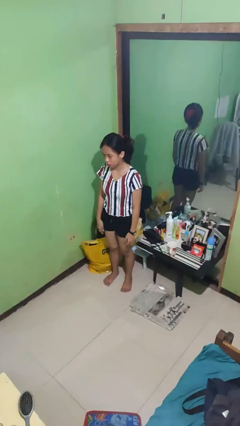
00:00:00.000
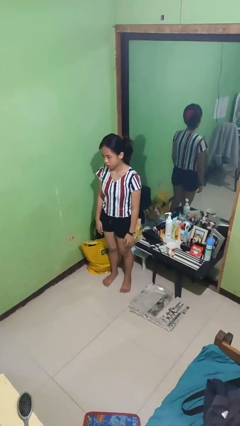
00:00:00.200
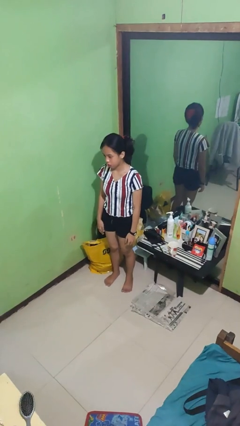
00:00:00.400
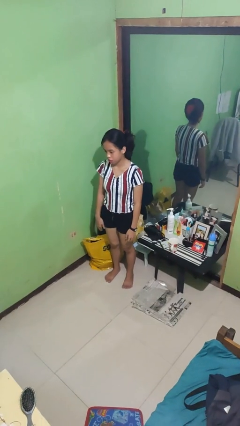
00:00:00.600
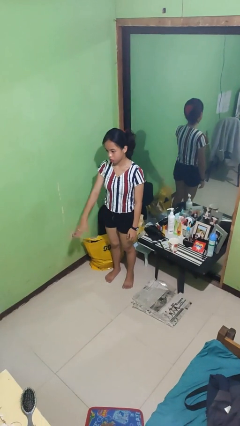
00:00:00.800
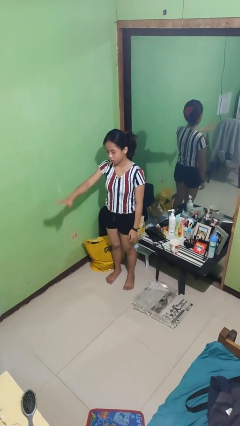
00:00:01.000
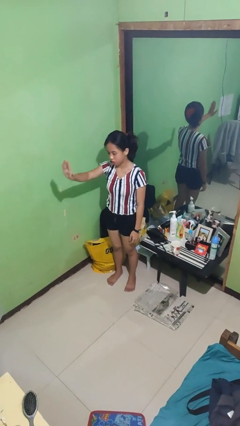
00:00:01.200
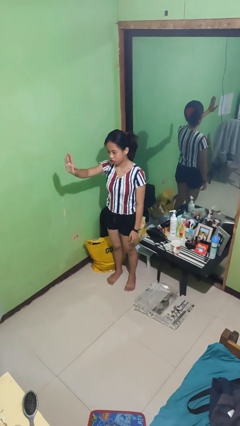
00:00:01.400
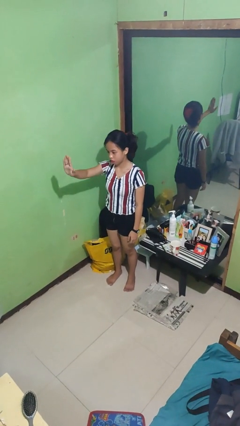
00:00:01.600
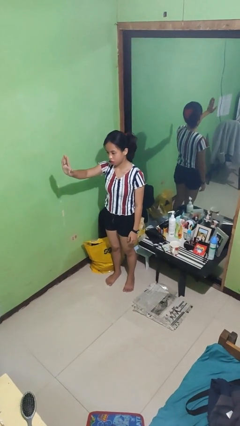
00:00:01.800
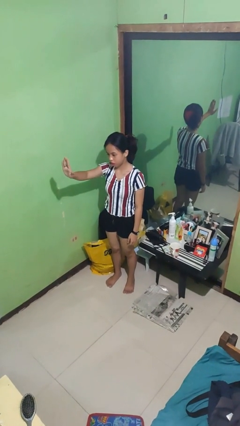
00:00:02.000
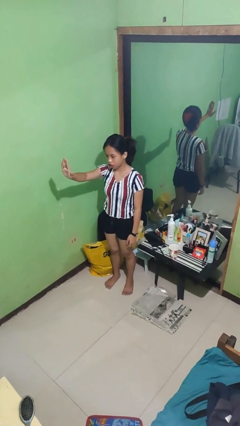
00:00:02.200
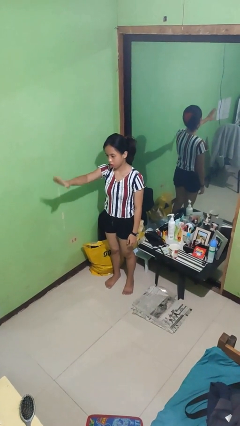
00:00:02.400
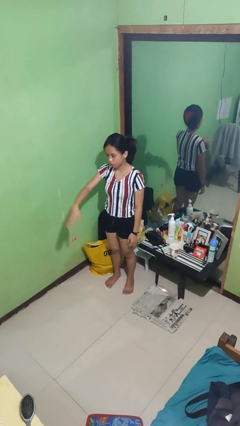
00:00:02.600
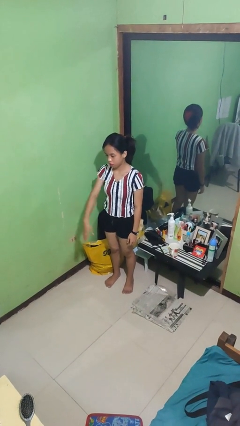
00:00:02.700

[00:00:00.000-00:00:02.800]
person gestures stop

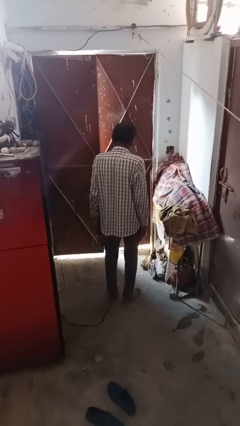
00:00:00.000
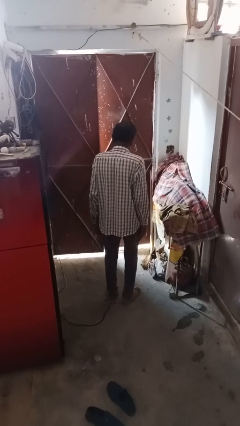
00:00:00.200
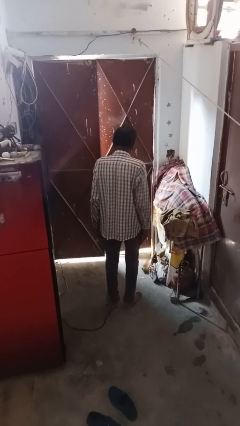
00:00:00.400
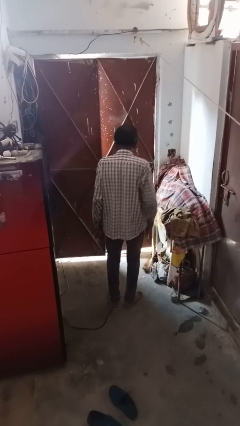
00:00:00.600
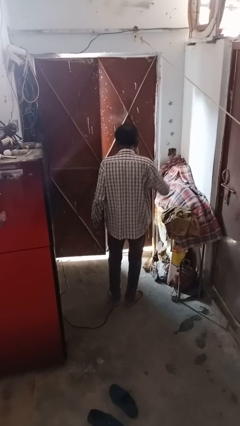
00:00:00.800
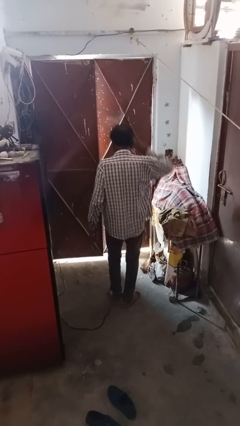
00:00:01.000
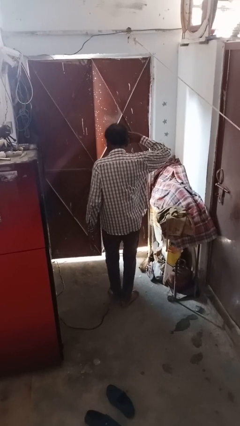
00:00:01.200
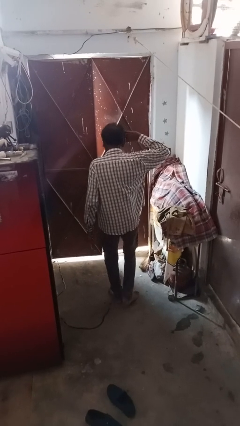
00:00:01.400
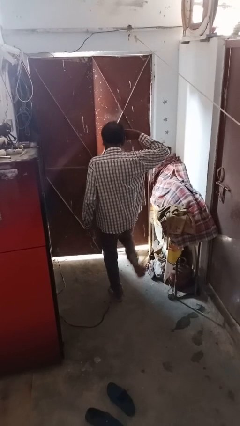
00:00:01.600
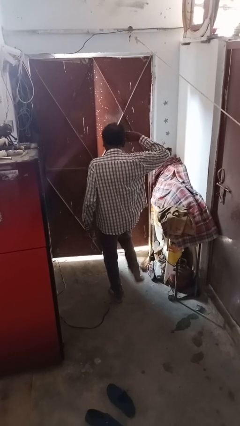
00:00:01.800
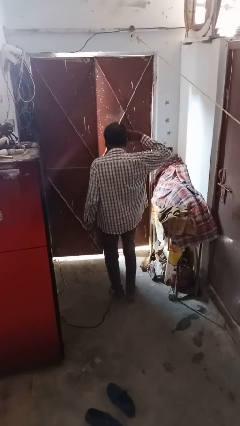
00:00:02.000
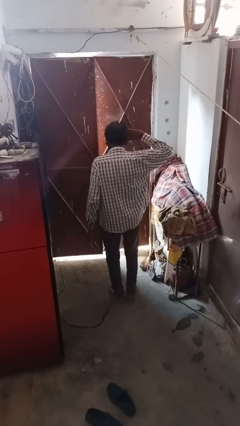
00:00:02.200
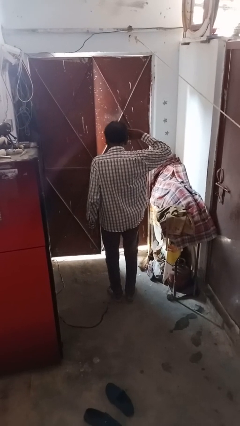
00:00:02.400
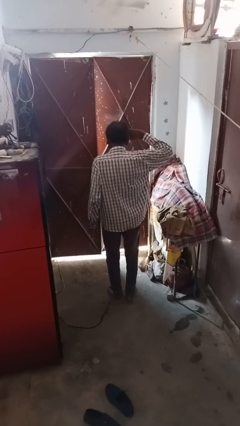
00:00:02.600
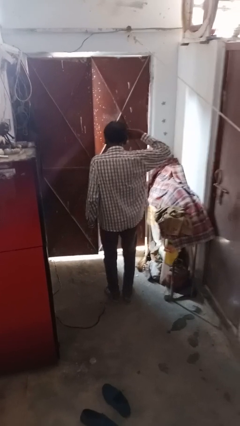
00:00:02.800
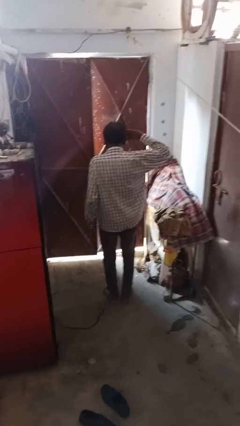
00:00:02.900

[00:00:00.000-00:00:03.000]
person salutes

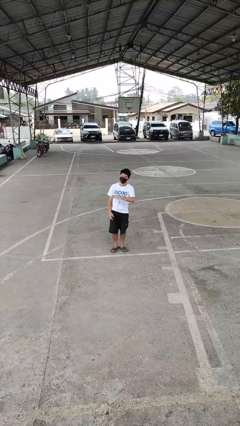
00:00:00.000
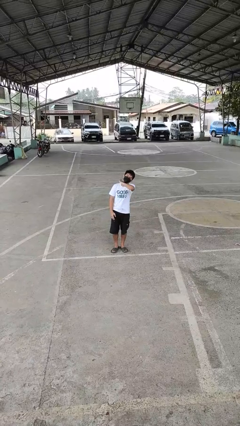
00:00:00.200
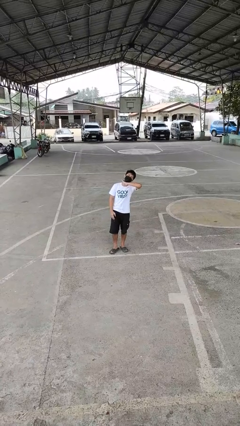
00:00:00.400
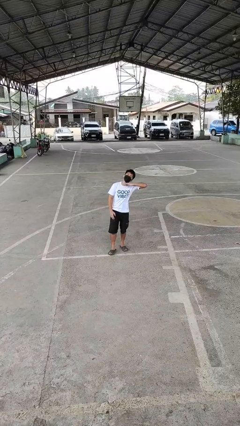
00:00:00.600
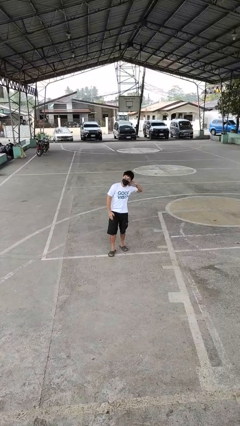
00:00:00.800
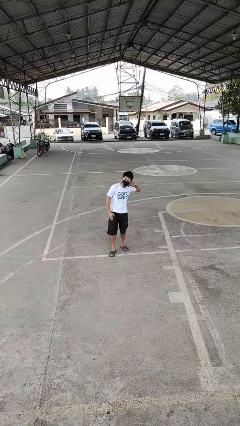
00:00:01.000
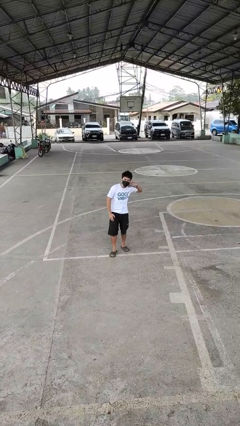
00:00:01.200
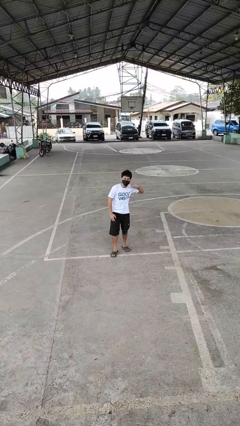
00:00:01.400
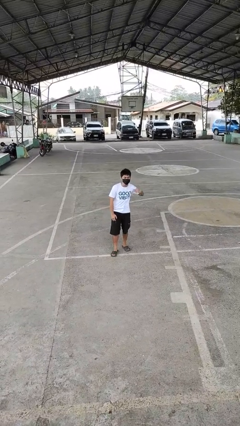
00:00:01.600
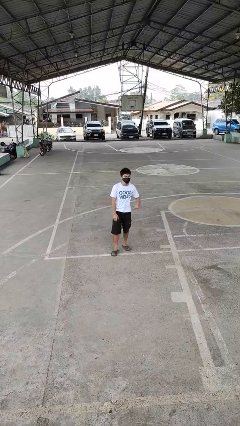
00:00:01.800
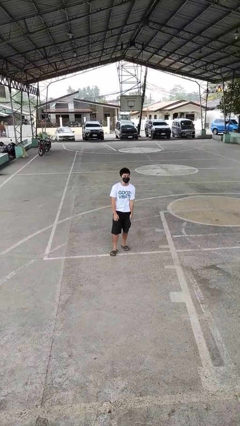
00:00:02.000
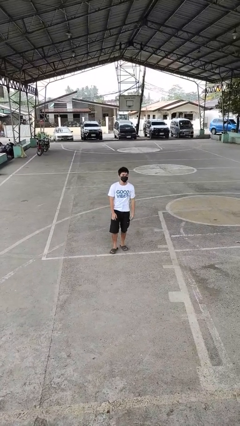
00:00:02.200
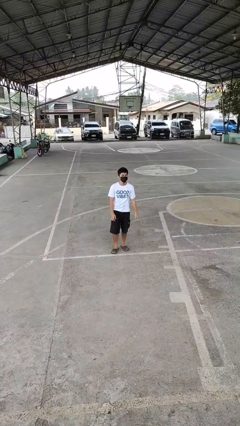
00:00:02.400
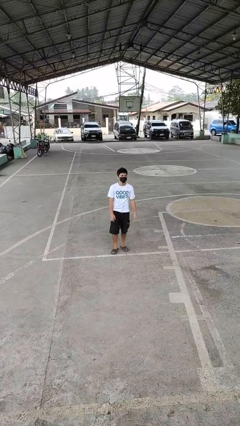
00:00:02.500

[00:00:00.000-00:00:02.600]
person gestures cut

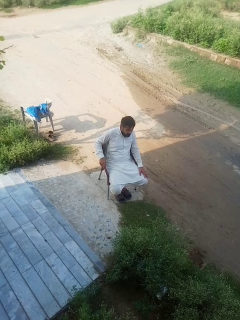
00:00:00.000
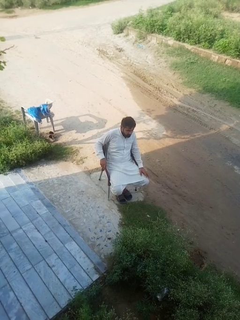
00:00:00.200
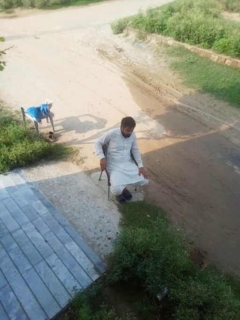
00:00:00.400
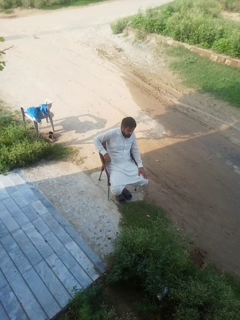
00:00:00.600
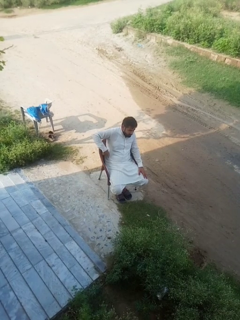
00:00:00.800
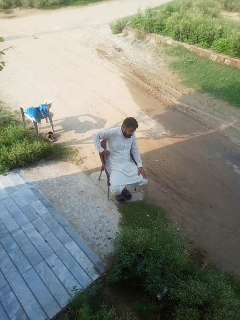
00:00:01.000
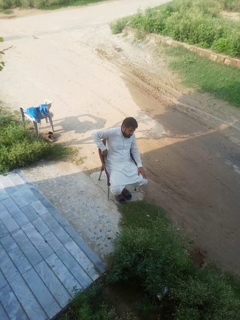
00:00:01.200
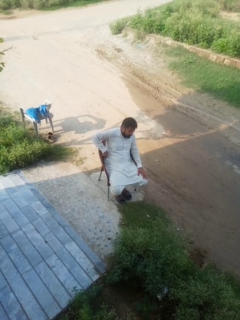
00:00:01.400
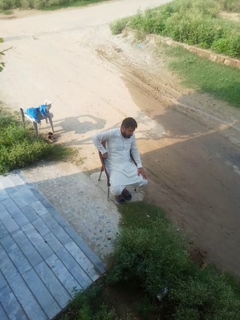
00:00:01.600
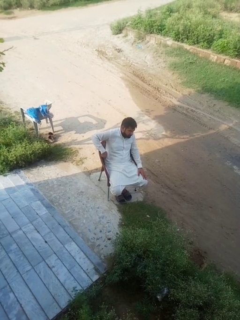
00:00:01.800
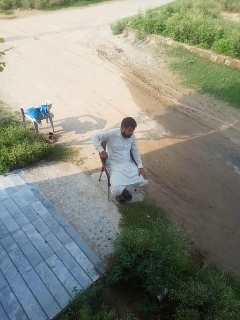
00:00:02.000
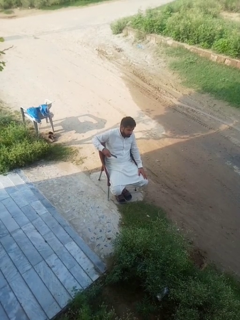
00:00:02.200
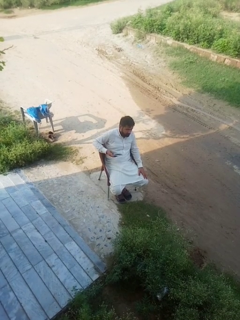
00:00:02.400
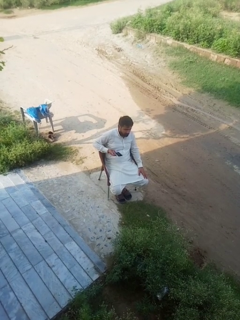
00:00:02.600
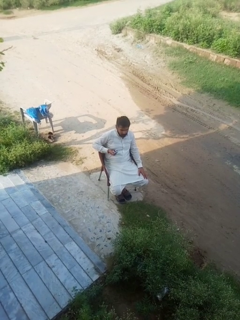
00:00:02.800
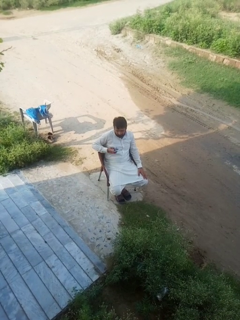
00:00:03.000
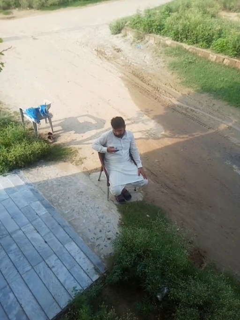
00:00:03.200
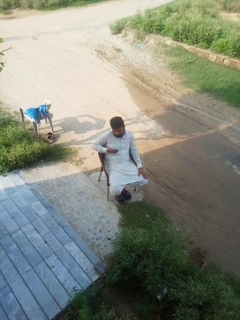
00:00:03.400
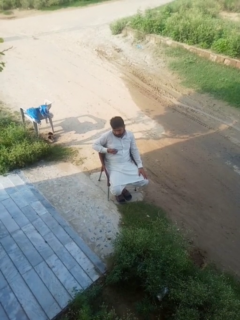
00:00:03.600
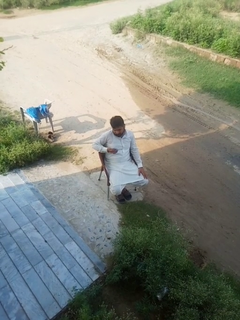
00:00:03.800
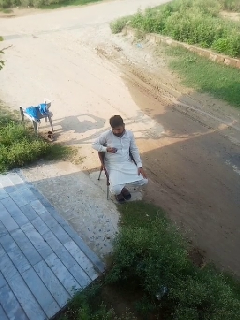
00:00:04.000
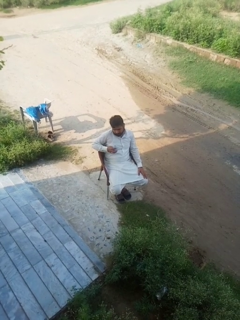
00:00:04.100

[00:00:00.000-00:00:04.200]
person takes phone from pocket

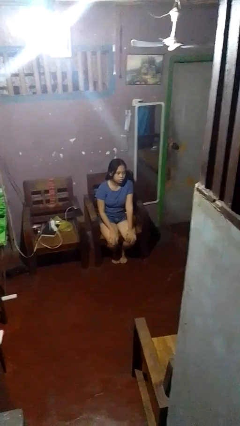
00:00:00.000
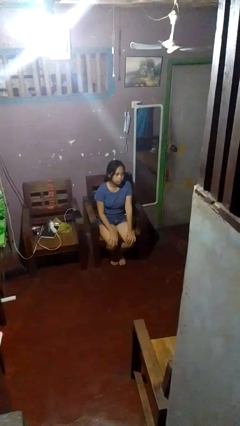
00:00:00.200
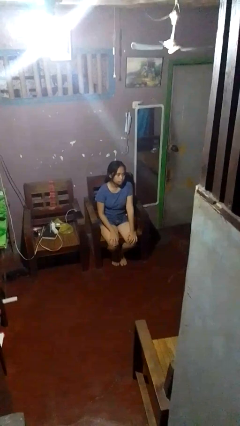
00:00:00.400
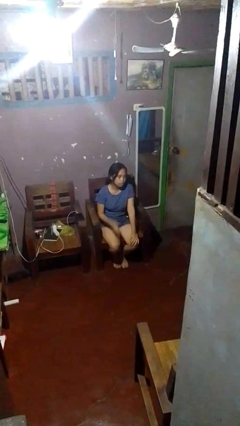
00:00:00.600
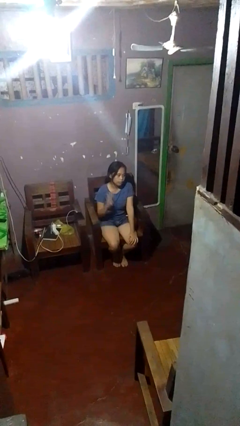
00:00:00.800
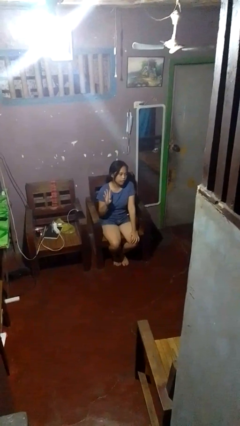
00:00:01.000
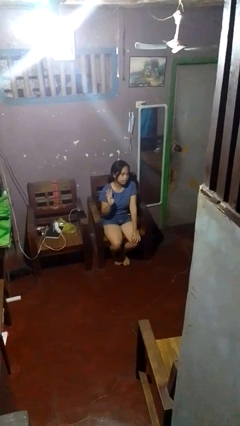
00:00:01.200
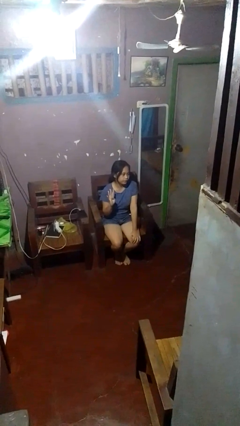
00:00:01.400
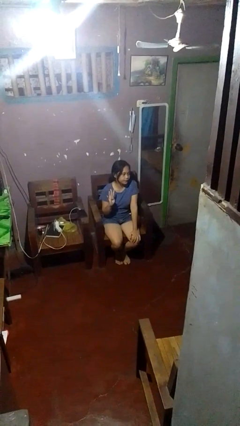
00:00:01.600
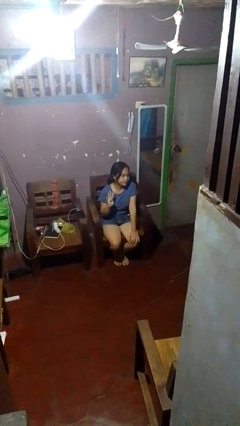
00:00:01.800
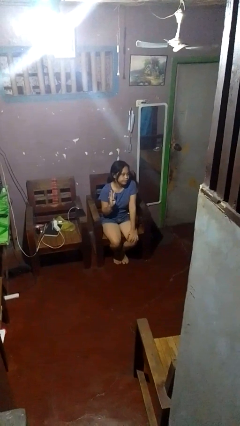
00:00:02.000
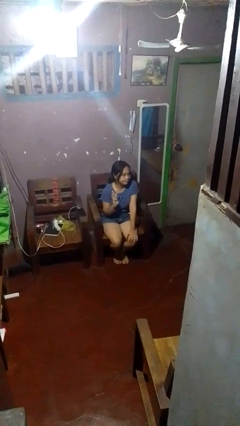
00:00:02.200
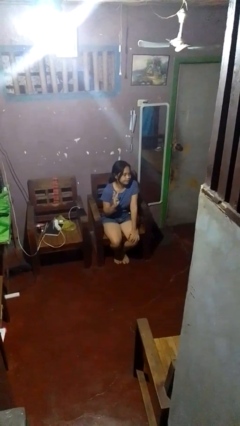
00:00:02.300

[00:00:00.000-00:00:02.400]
person gestures number four

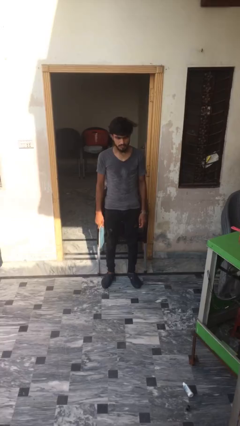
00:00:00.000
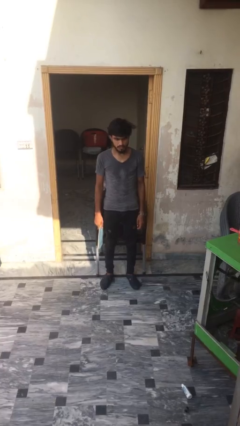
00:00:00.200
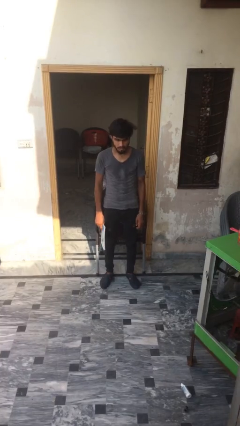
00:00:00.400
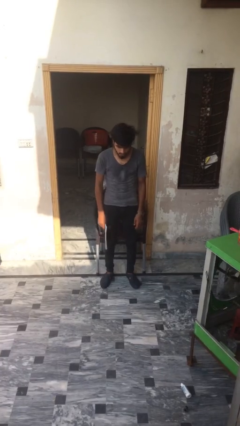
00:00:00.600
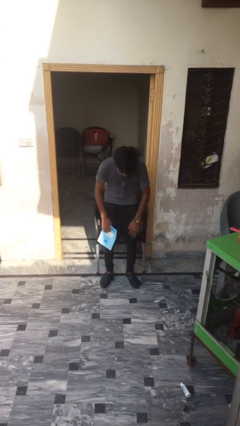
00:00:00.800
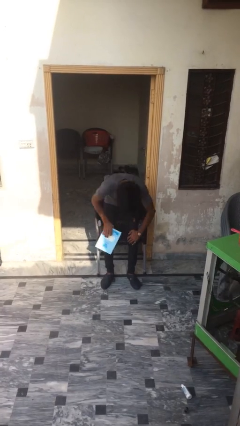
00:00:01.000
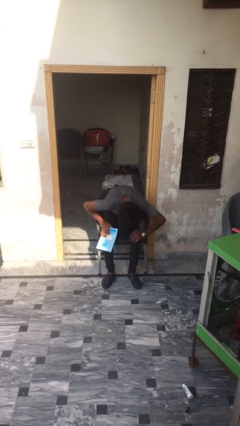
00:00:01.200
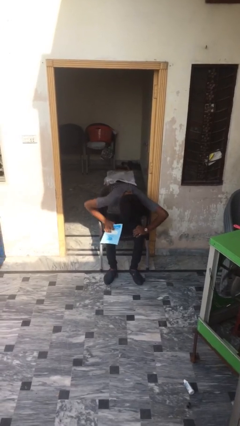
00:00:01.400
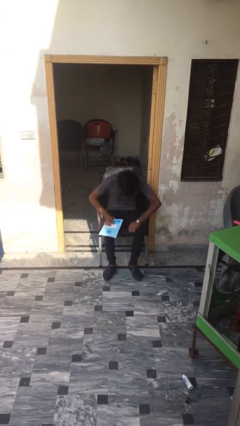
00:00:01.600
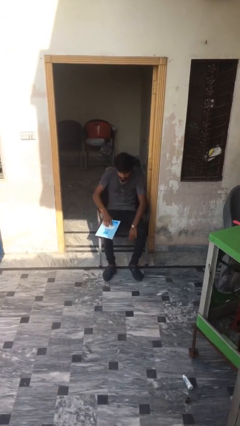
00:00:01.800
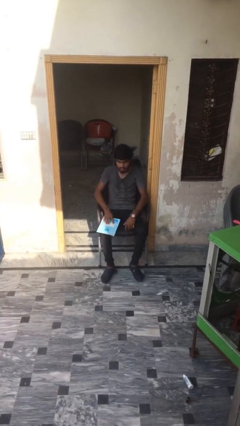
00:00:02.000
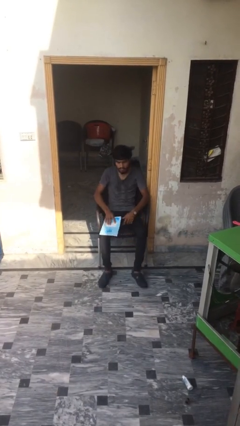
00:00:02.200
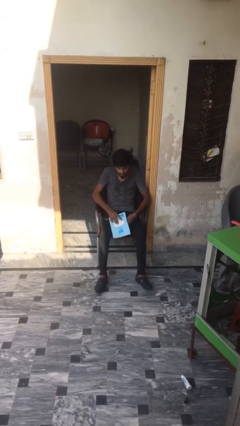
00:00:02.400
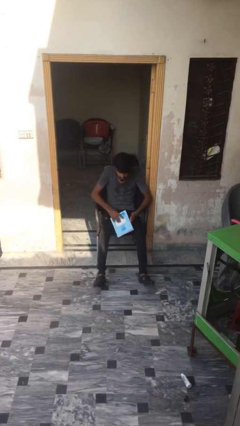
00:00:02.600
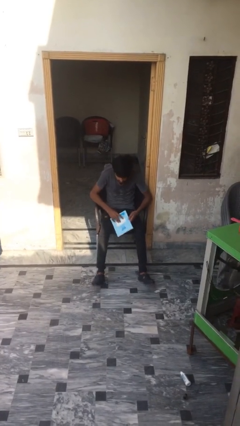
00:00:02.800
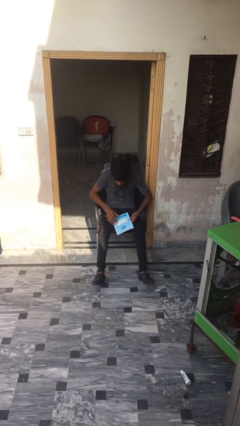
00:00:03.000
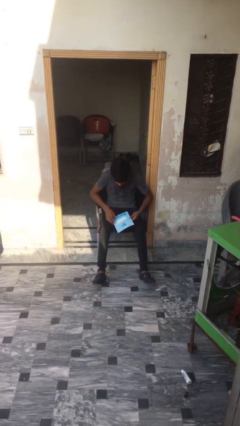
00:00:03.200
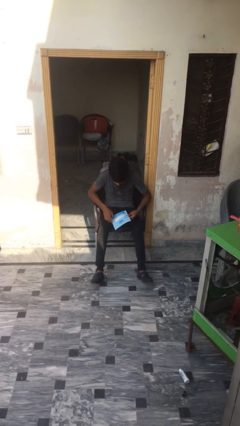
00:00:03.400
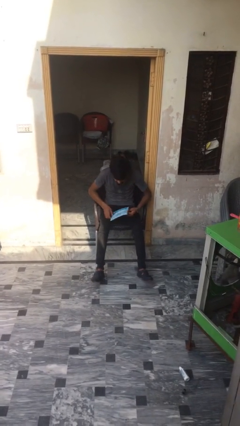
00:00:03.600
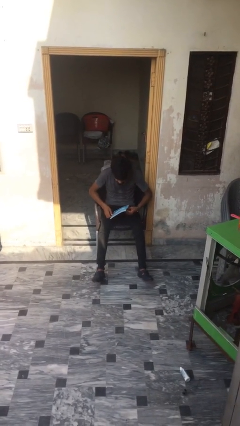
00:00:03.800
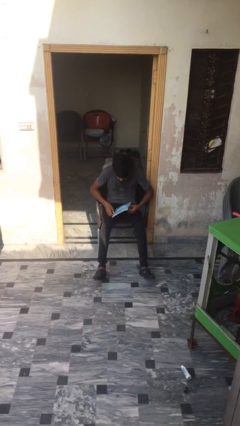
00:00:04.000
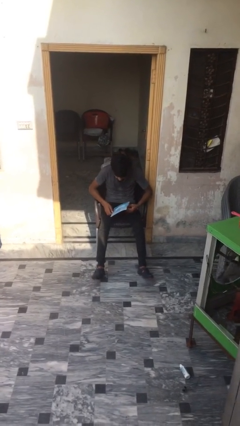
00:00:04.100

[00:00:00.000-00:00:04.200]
person sits down
